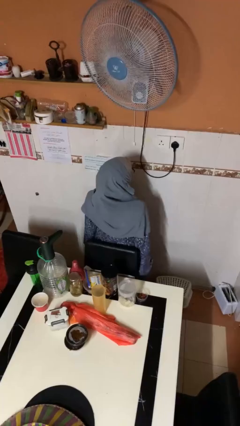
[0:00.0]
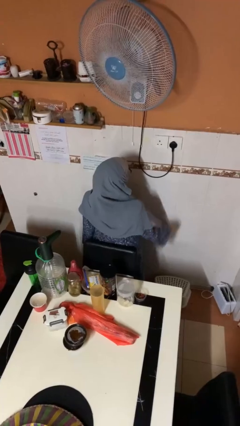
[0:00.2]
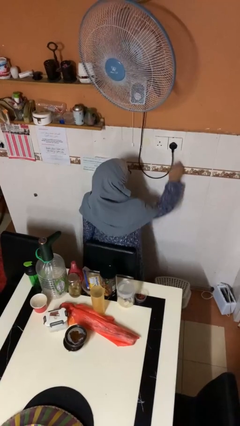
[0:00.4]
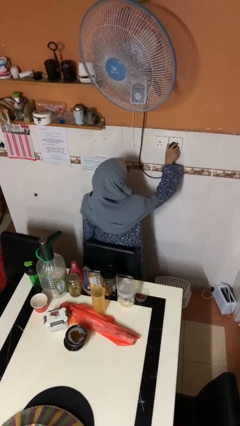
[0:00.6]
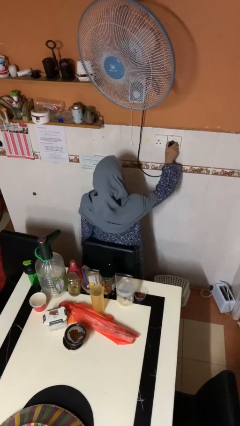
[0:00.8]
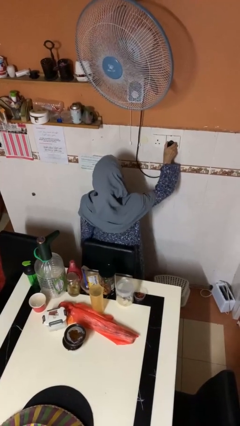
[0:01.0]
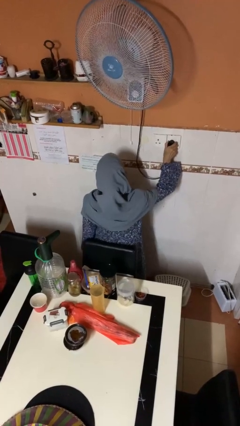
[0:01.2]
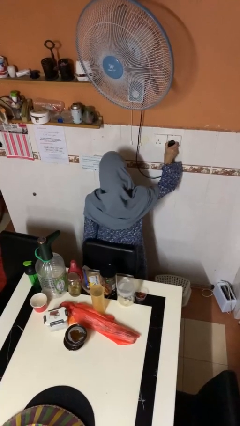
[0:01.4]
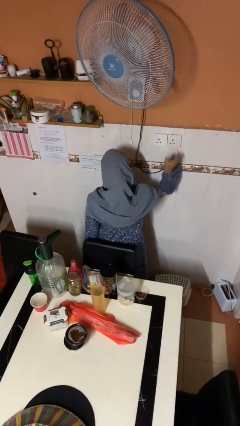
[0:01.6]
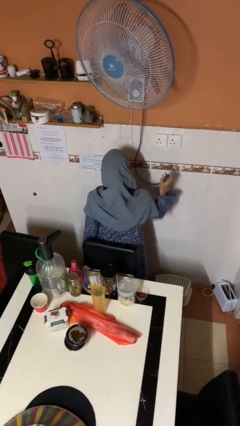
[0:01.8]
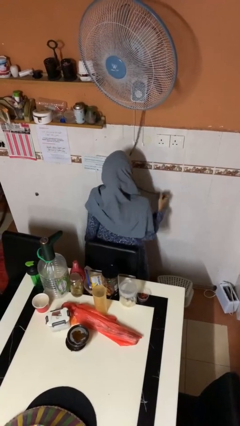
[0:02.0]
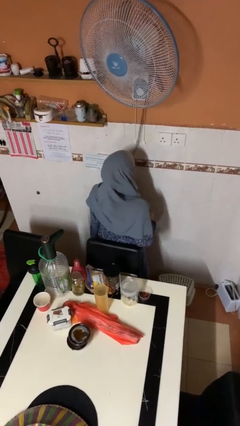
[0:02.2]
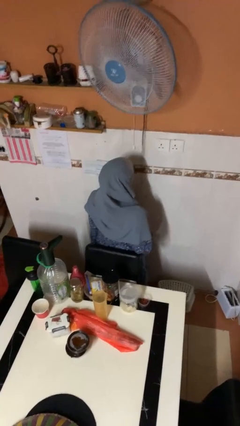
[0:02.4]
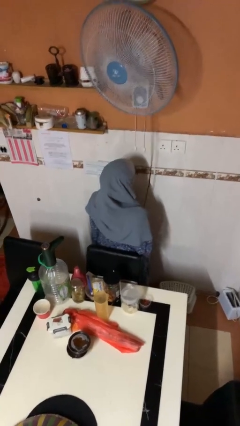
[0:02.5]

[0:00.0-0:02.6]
person unplugs from electrical socket

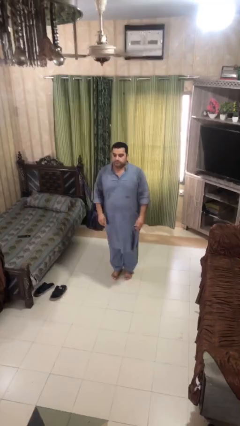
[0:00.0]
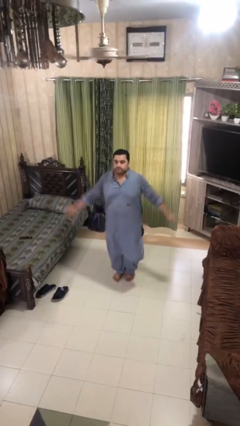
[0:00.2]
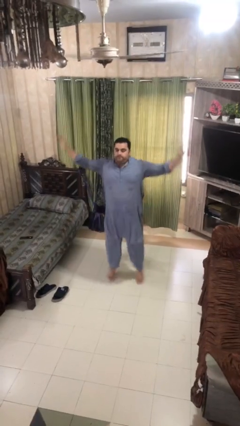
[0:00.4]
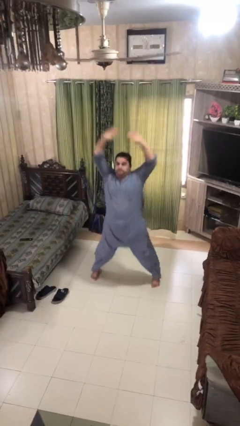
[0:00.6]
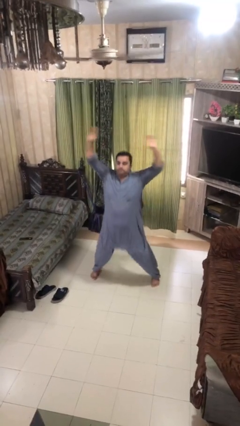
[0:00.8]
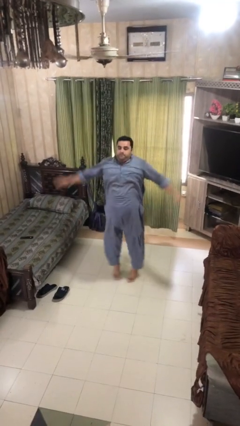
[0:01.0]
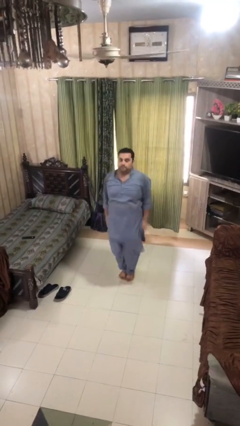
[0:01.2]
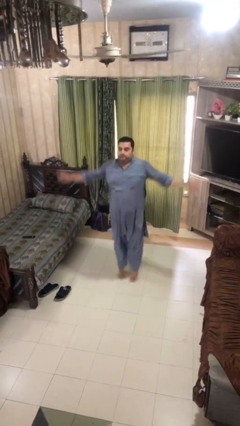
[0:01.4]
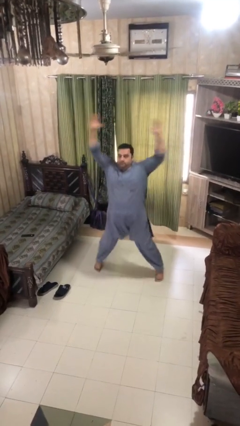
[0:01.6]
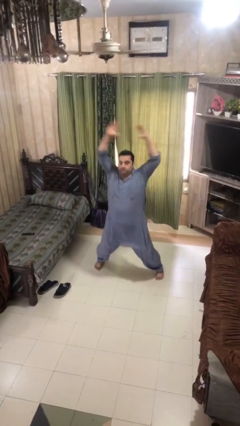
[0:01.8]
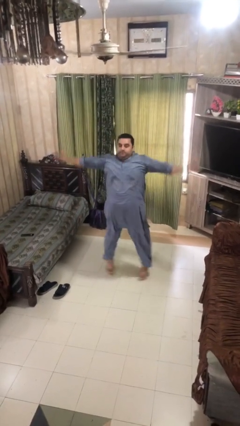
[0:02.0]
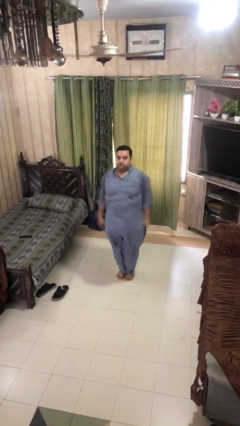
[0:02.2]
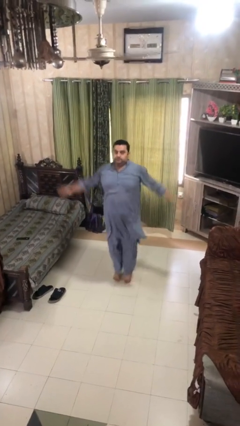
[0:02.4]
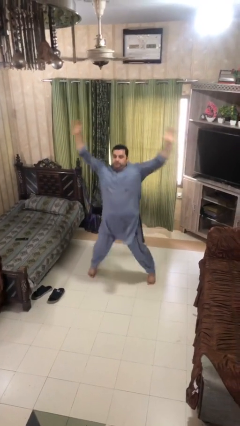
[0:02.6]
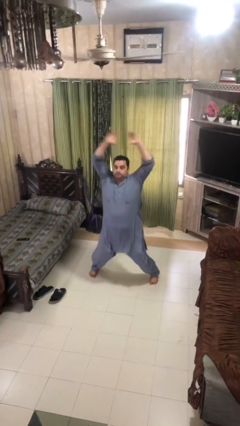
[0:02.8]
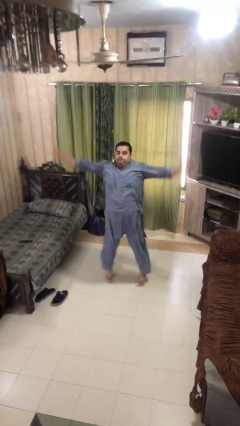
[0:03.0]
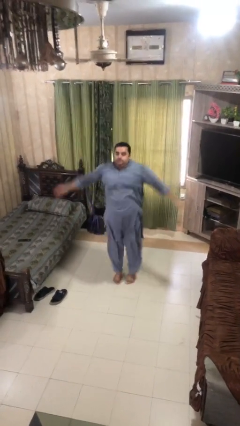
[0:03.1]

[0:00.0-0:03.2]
person exercises with jumping jacks

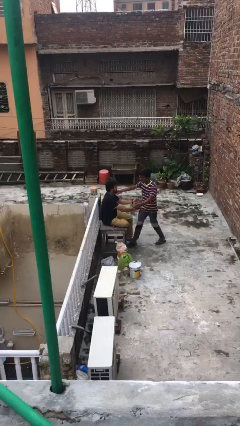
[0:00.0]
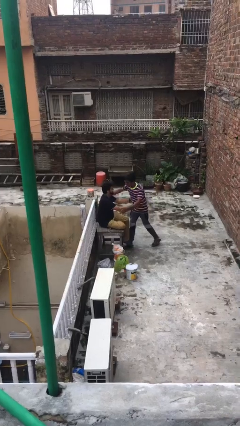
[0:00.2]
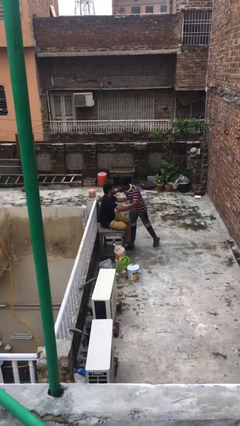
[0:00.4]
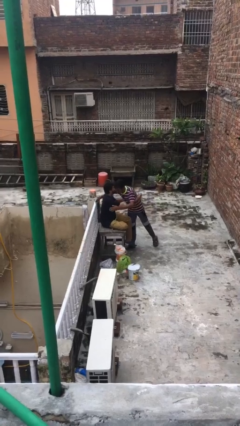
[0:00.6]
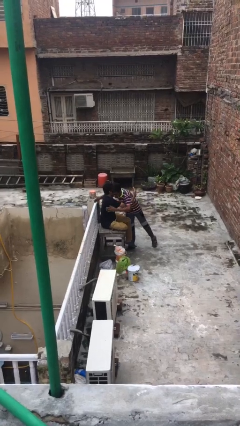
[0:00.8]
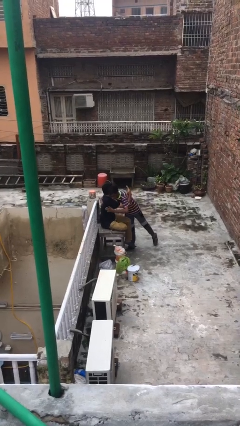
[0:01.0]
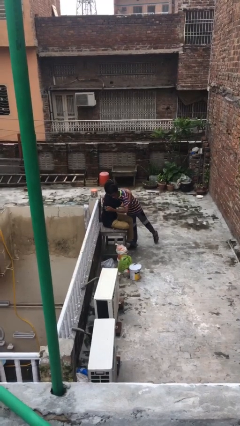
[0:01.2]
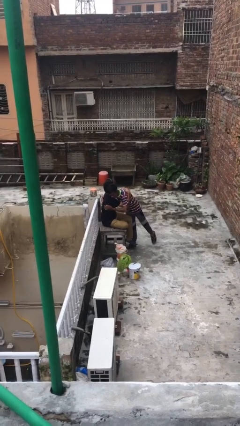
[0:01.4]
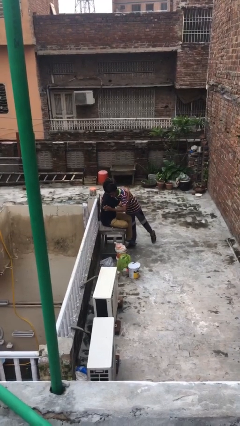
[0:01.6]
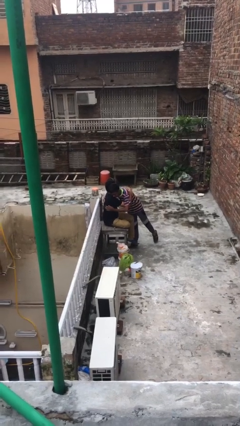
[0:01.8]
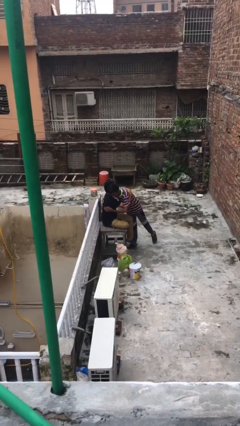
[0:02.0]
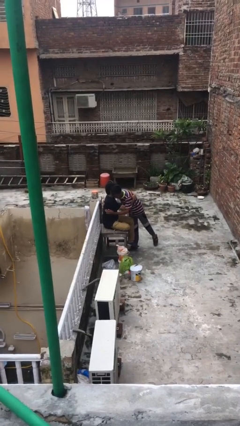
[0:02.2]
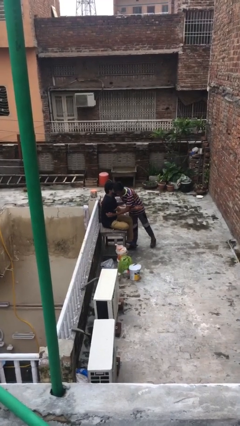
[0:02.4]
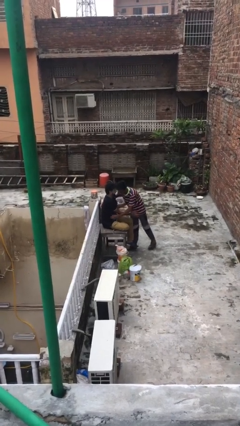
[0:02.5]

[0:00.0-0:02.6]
person embraces person

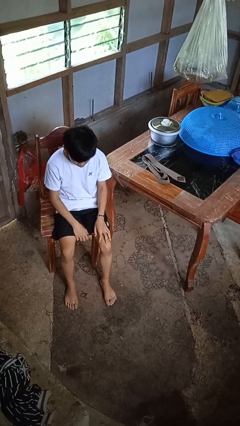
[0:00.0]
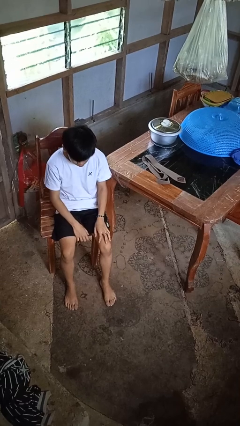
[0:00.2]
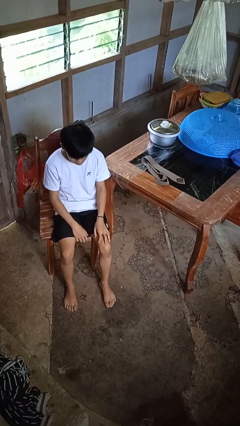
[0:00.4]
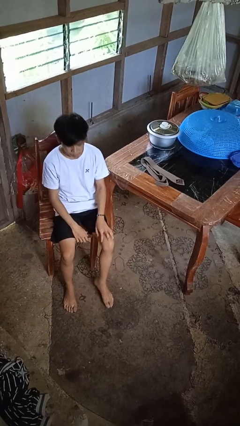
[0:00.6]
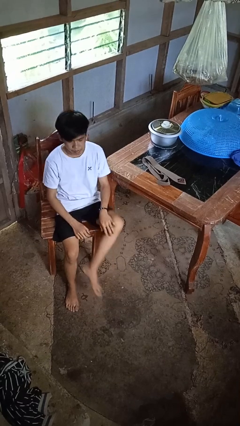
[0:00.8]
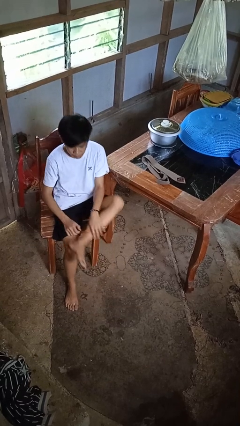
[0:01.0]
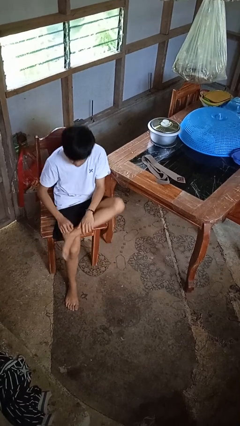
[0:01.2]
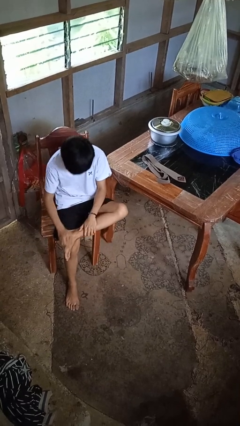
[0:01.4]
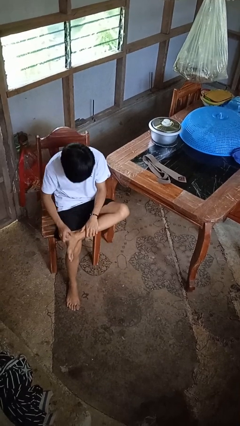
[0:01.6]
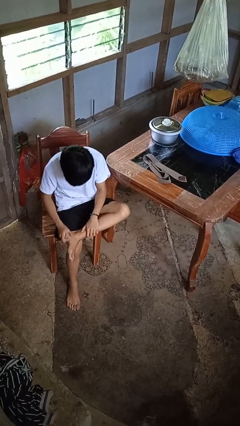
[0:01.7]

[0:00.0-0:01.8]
person rubs foot

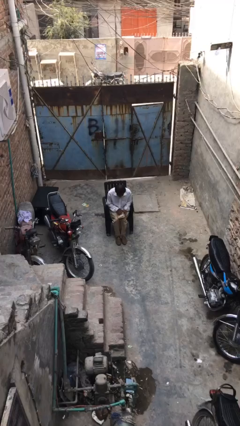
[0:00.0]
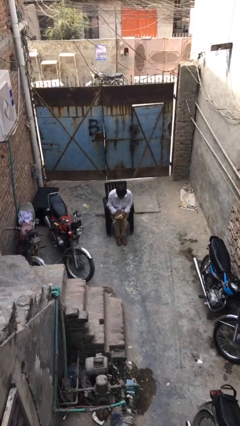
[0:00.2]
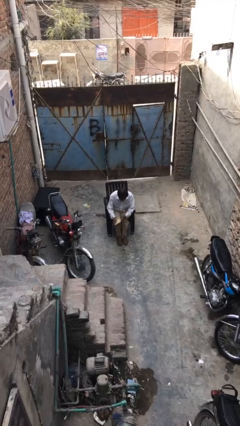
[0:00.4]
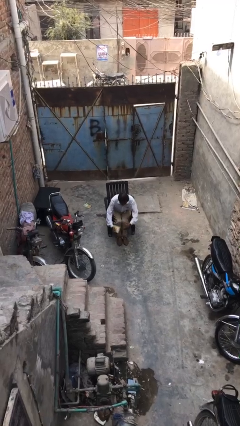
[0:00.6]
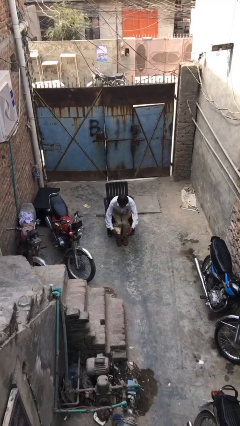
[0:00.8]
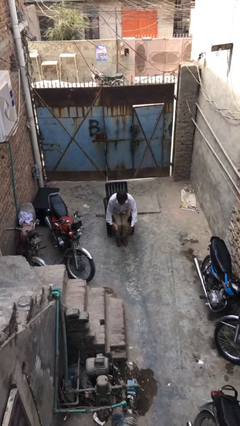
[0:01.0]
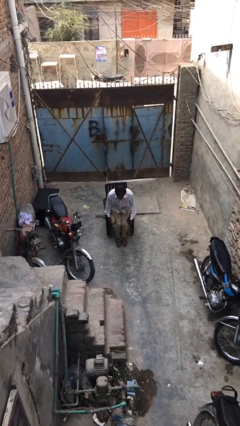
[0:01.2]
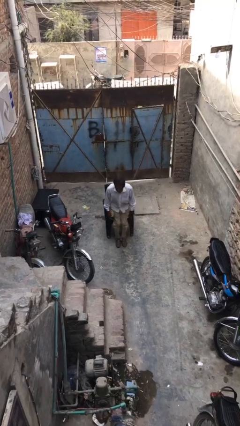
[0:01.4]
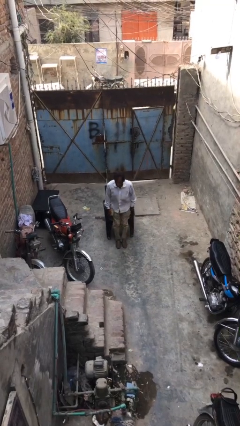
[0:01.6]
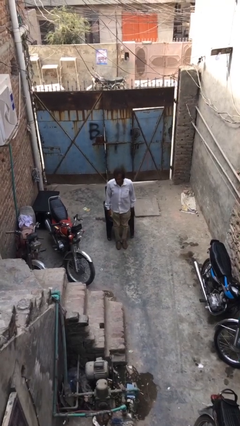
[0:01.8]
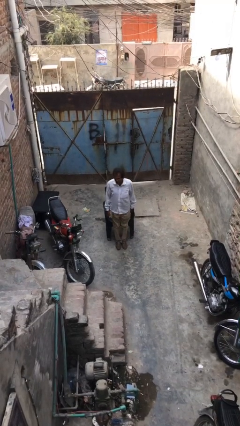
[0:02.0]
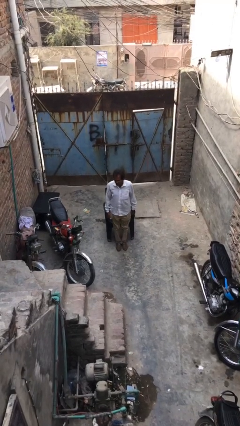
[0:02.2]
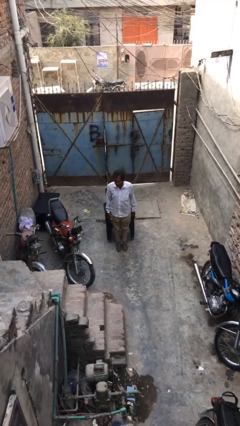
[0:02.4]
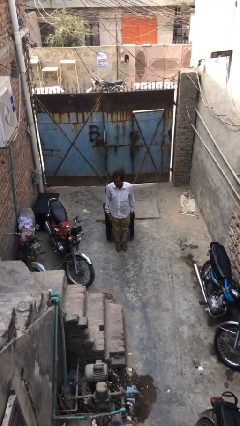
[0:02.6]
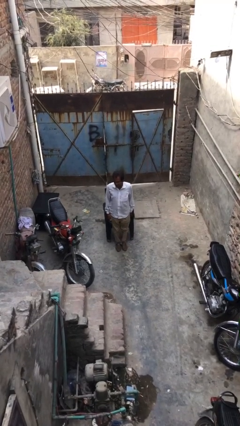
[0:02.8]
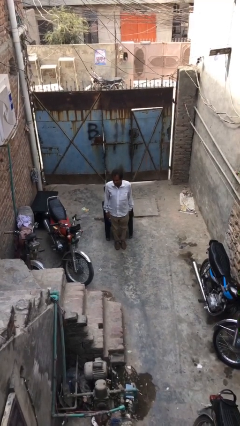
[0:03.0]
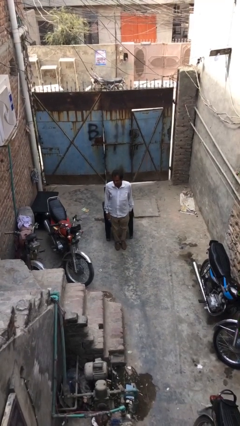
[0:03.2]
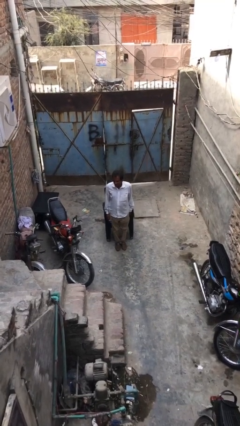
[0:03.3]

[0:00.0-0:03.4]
person stands up

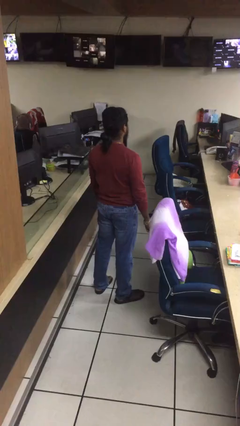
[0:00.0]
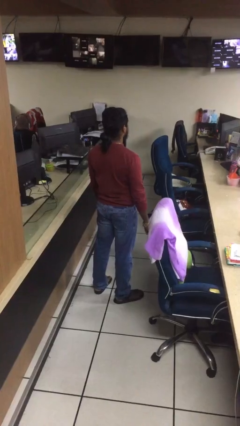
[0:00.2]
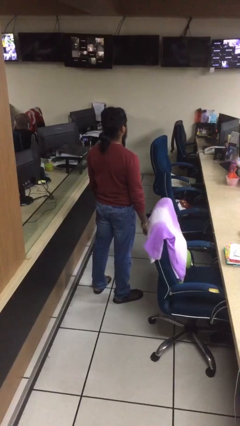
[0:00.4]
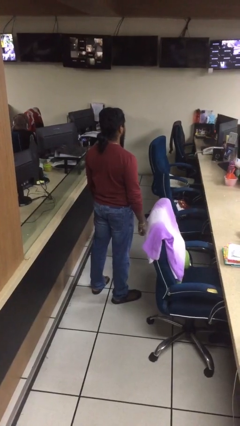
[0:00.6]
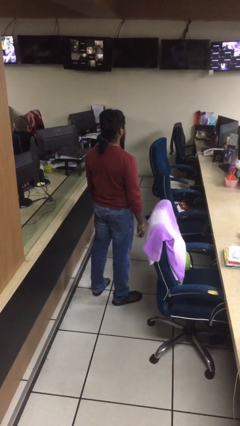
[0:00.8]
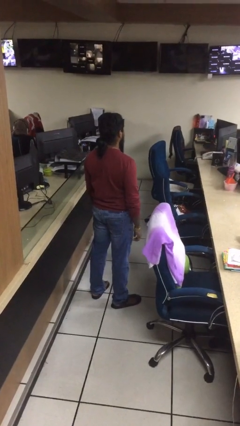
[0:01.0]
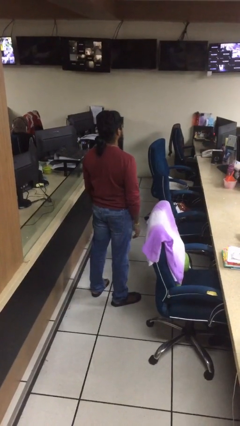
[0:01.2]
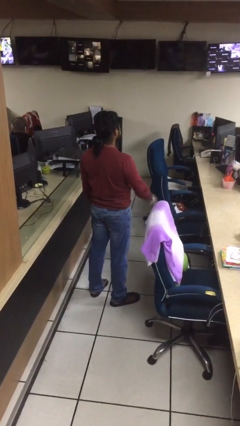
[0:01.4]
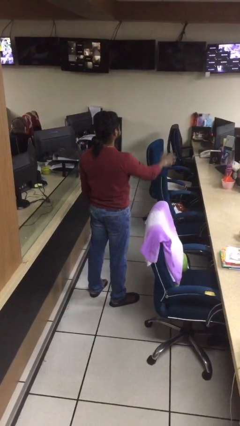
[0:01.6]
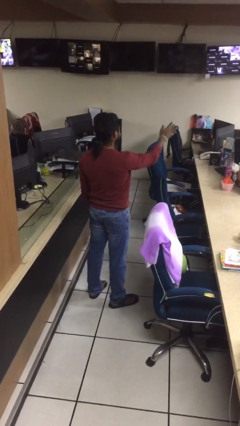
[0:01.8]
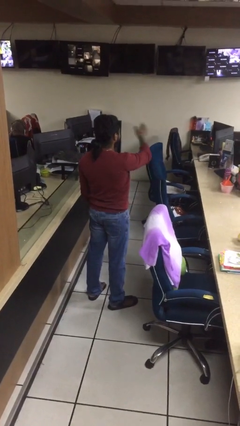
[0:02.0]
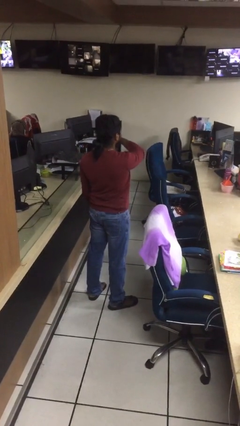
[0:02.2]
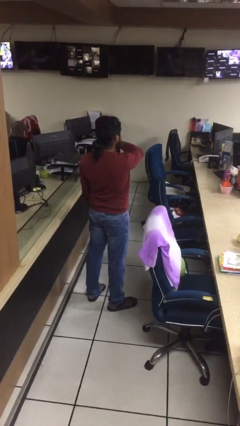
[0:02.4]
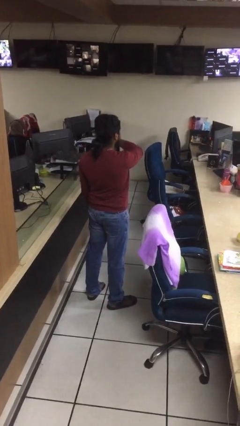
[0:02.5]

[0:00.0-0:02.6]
person gestures swipe left

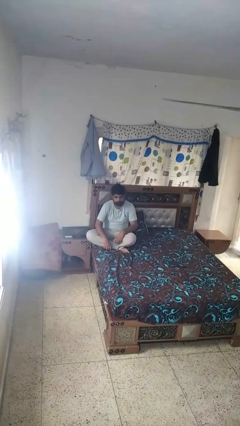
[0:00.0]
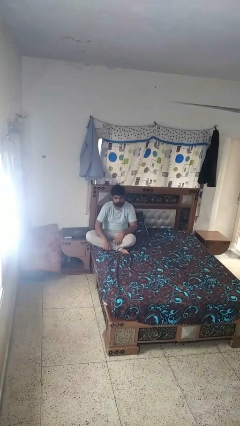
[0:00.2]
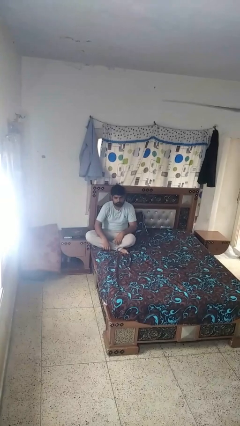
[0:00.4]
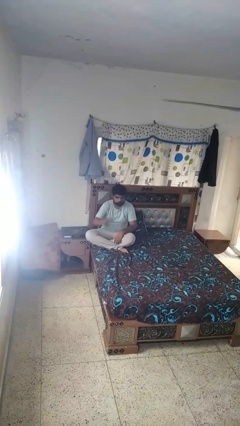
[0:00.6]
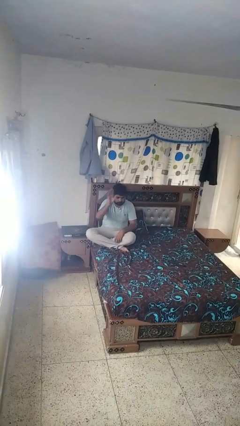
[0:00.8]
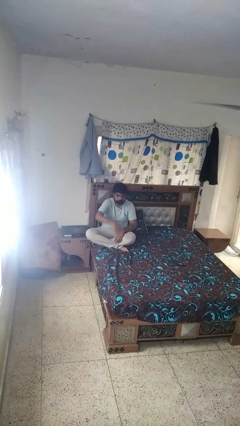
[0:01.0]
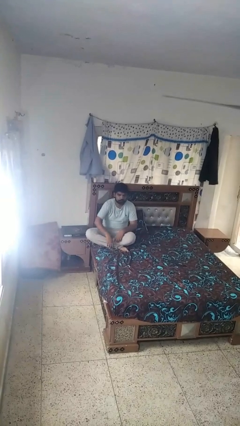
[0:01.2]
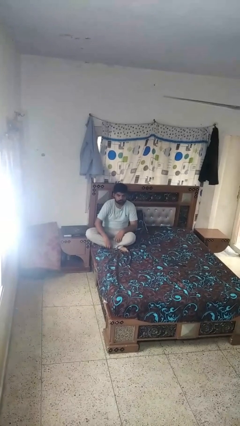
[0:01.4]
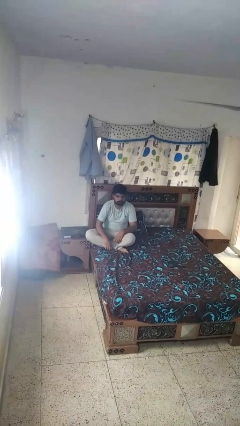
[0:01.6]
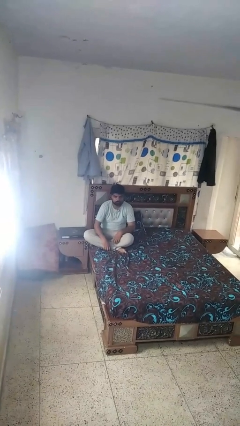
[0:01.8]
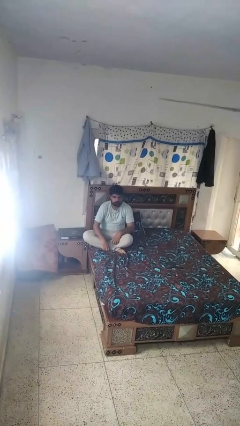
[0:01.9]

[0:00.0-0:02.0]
person gestures swipe down
